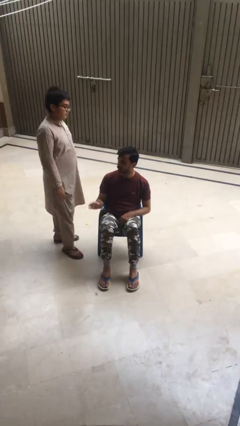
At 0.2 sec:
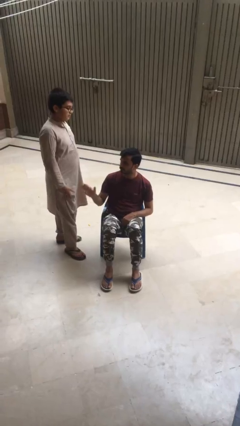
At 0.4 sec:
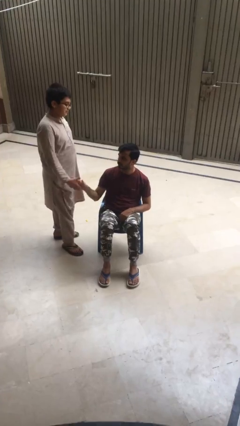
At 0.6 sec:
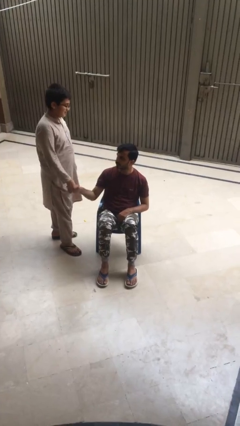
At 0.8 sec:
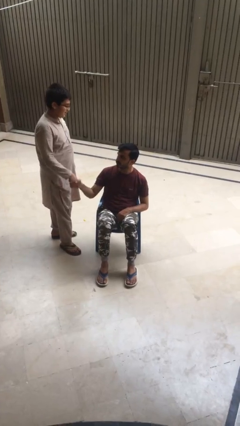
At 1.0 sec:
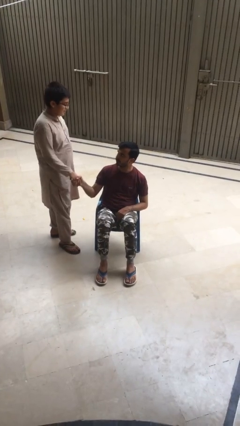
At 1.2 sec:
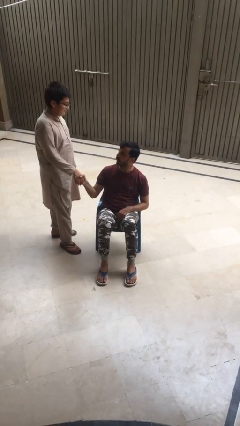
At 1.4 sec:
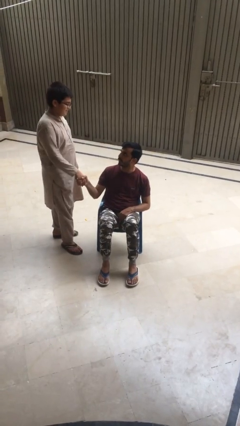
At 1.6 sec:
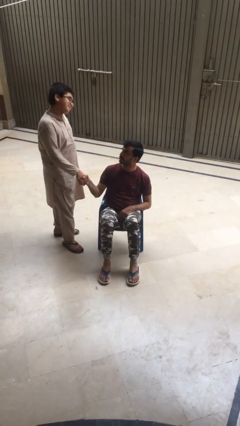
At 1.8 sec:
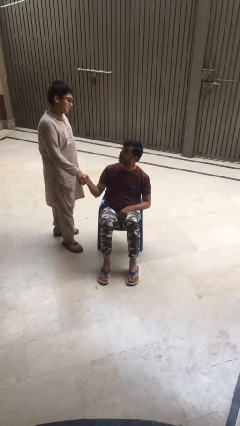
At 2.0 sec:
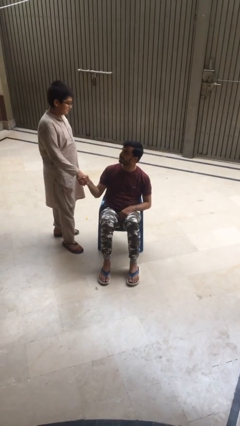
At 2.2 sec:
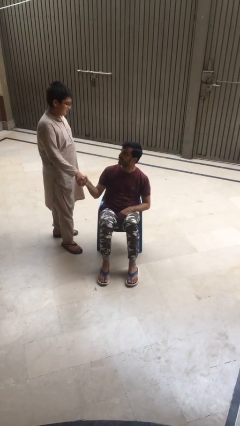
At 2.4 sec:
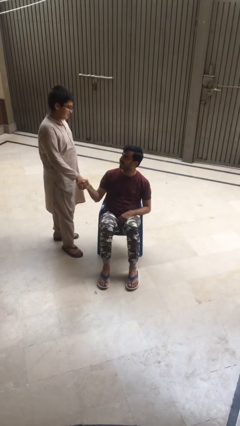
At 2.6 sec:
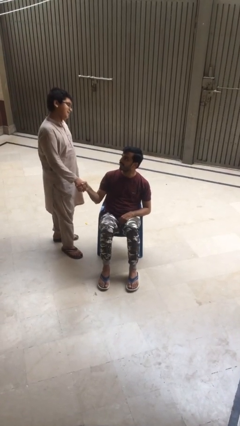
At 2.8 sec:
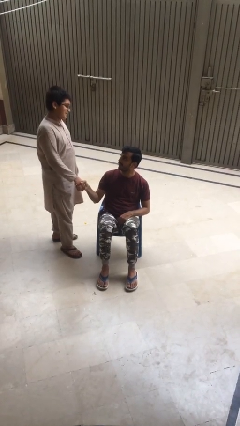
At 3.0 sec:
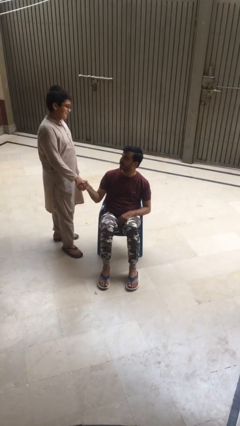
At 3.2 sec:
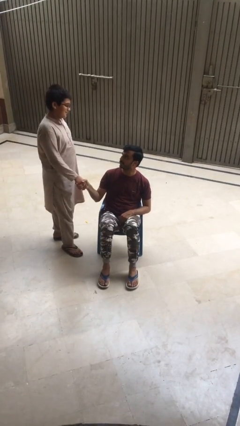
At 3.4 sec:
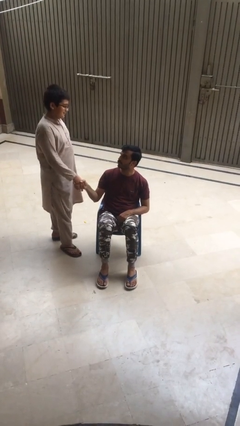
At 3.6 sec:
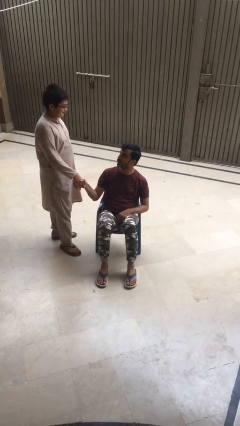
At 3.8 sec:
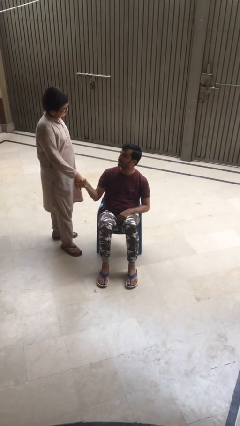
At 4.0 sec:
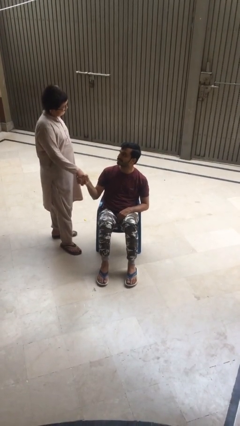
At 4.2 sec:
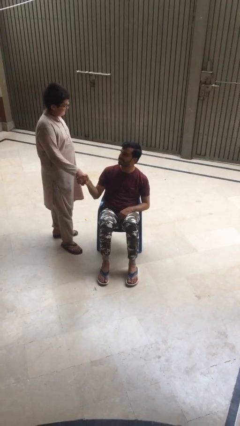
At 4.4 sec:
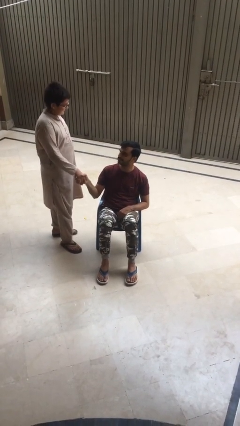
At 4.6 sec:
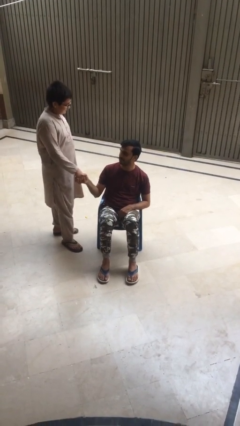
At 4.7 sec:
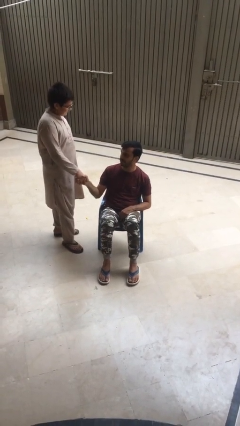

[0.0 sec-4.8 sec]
person shakes hand

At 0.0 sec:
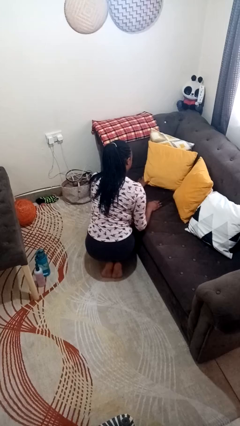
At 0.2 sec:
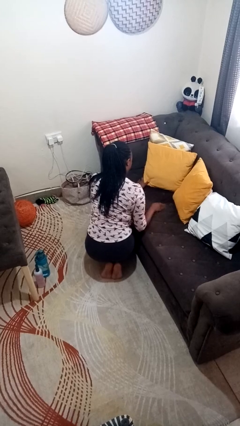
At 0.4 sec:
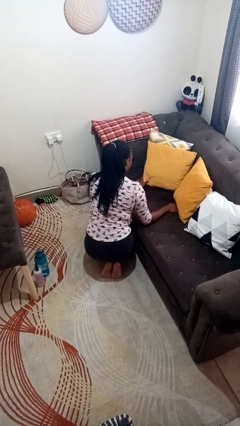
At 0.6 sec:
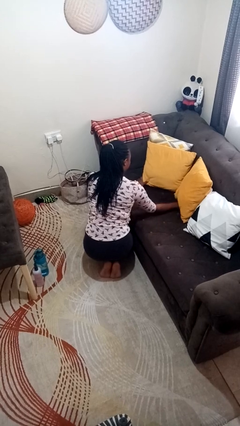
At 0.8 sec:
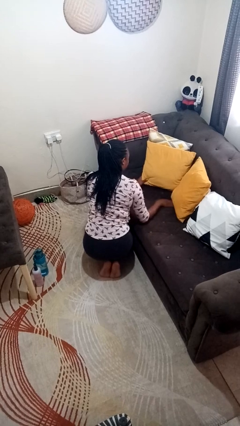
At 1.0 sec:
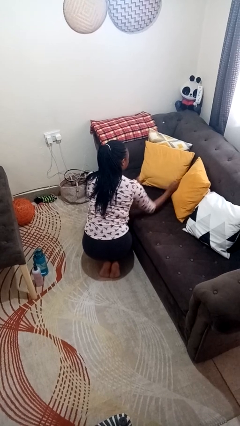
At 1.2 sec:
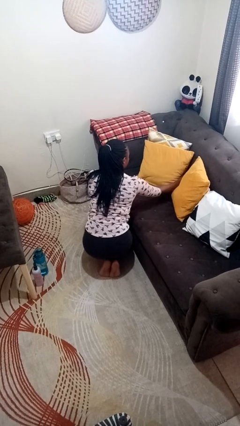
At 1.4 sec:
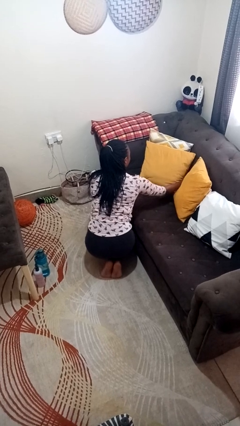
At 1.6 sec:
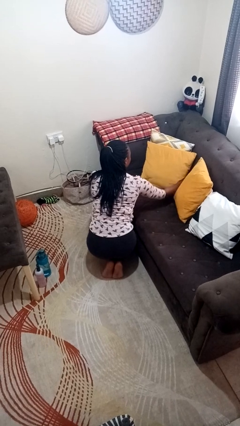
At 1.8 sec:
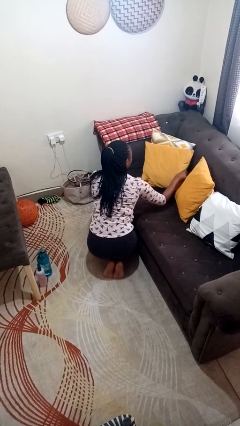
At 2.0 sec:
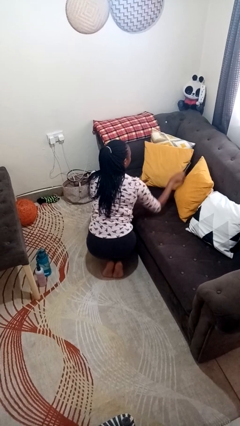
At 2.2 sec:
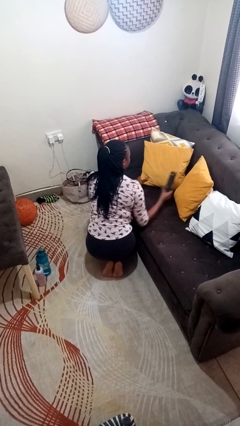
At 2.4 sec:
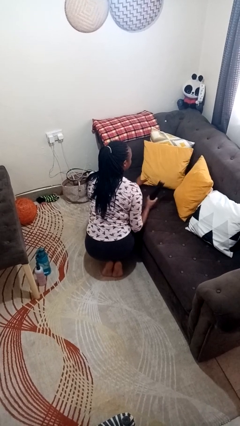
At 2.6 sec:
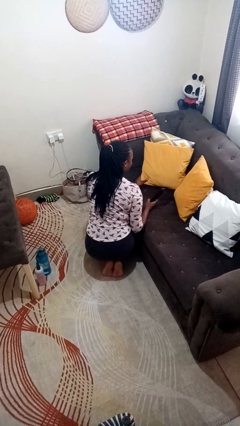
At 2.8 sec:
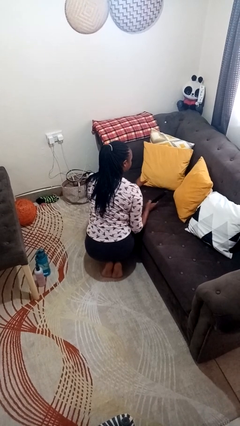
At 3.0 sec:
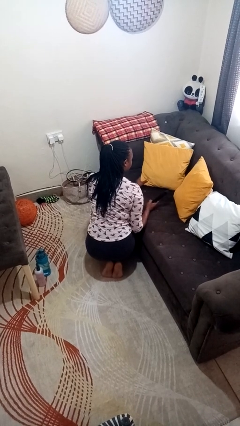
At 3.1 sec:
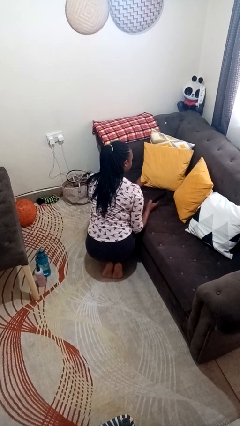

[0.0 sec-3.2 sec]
person searches in couch

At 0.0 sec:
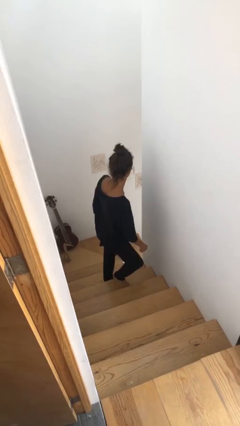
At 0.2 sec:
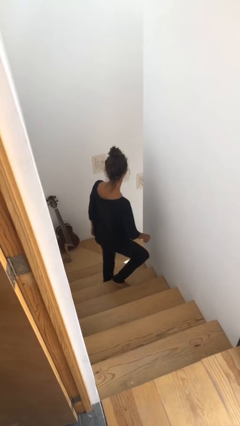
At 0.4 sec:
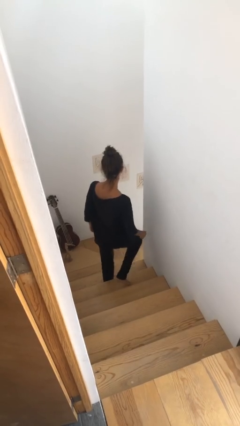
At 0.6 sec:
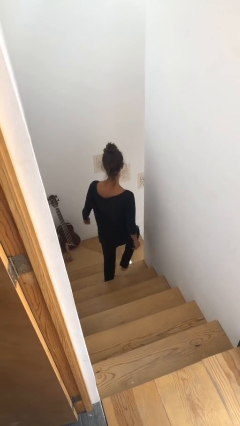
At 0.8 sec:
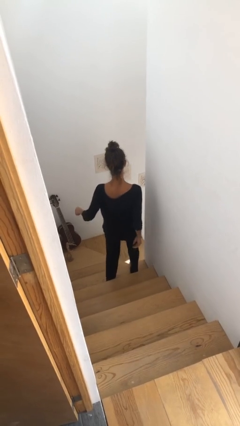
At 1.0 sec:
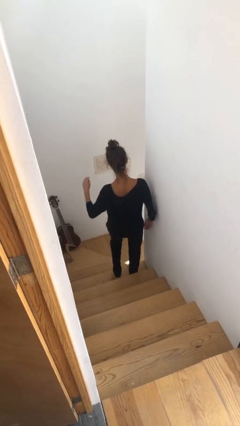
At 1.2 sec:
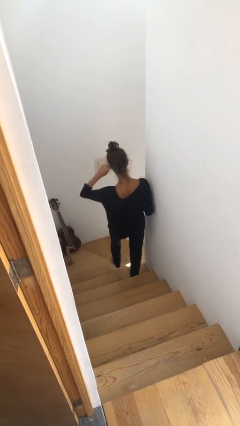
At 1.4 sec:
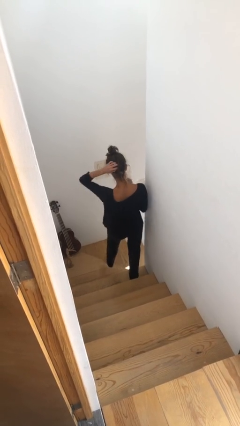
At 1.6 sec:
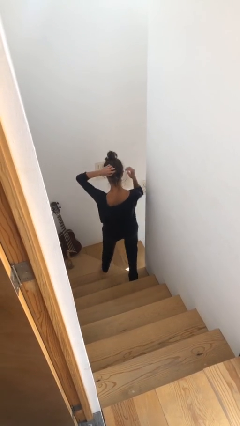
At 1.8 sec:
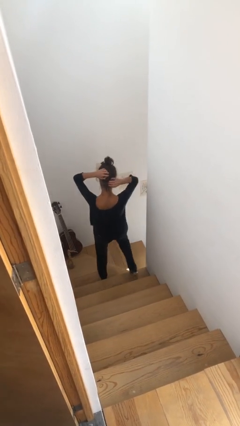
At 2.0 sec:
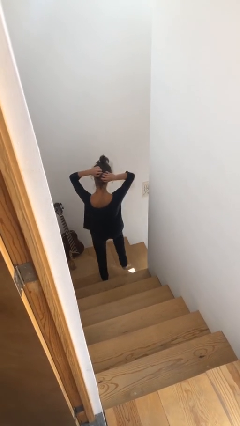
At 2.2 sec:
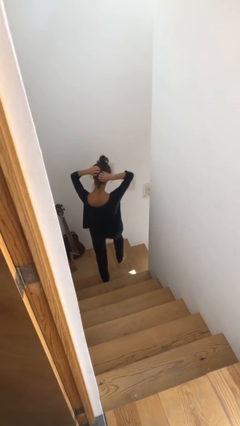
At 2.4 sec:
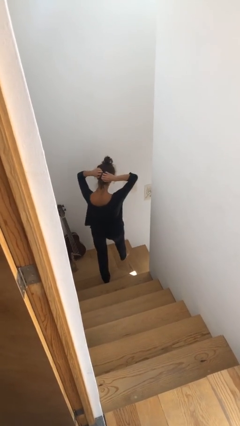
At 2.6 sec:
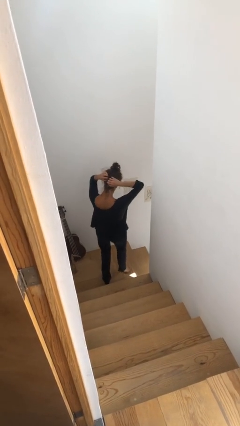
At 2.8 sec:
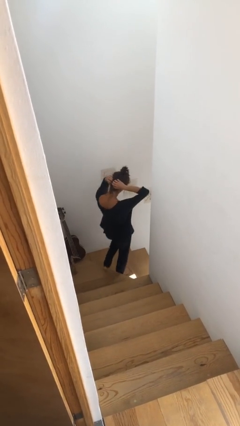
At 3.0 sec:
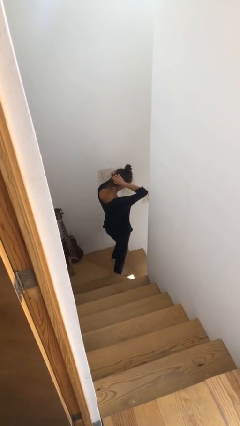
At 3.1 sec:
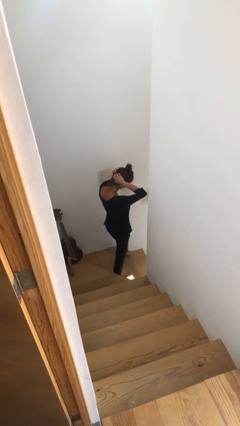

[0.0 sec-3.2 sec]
person climbs down stairs

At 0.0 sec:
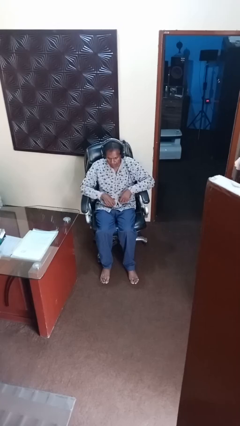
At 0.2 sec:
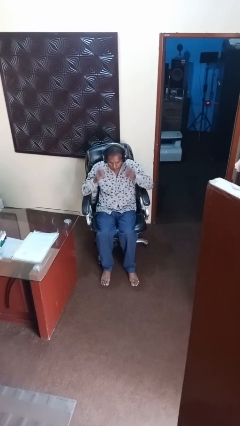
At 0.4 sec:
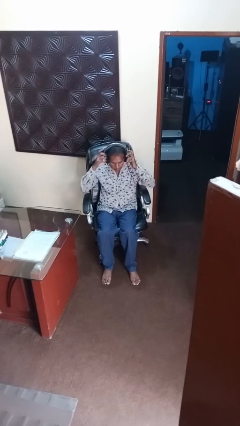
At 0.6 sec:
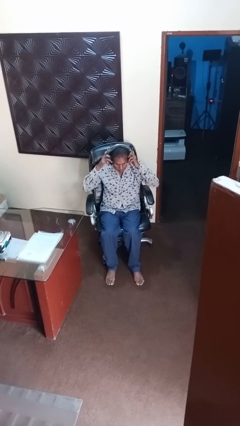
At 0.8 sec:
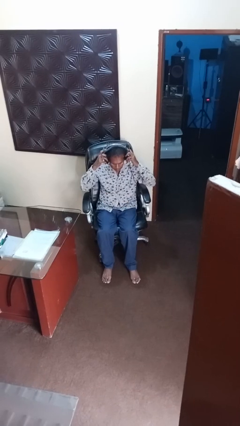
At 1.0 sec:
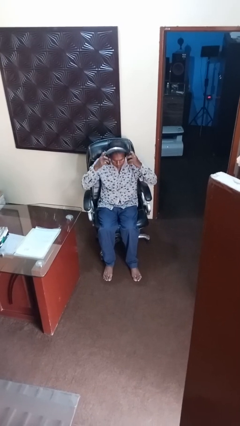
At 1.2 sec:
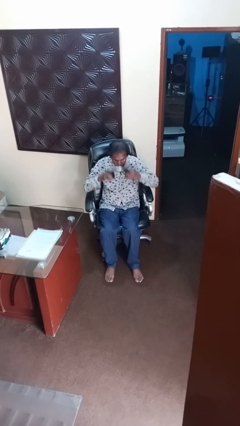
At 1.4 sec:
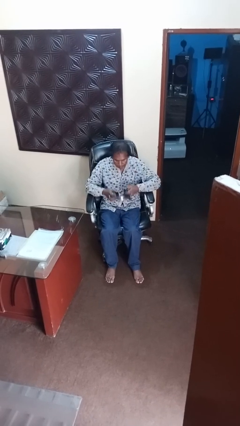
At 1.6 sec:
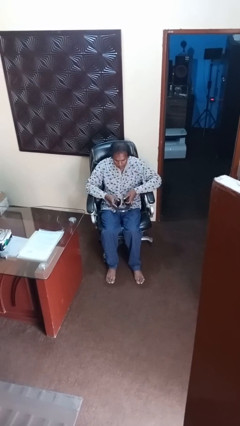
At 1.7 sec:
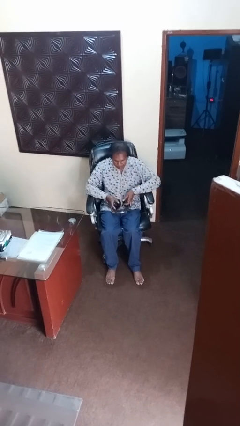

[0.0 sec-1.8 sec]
person takes off headphones

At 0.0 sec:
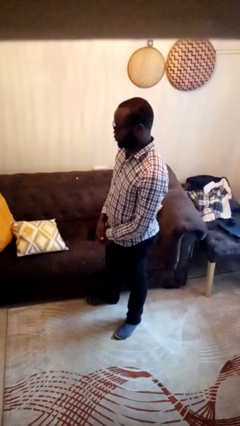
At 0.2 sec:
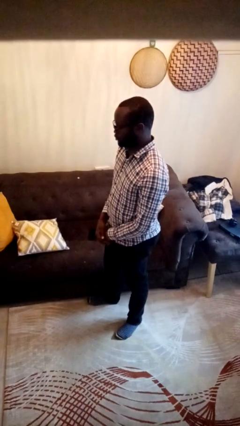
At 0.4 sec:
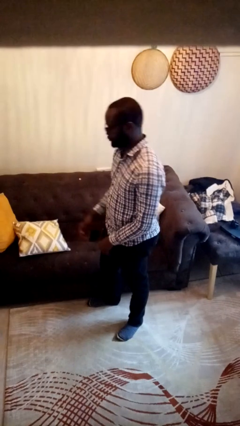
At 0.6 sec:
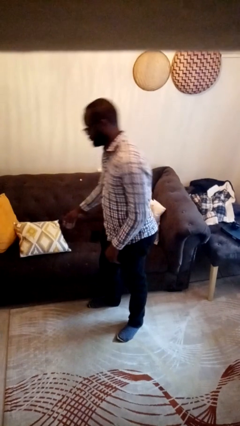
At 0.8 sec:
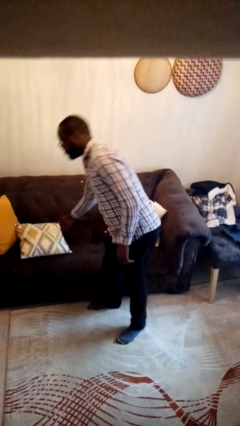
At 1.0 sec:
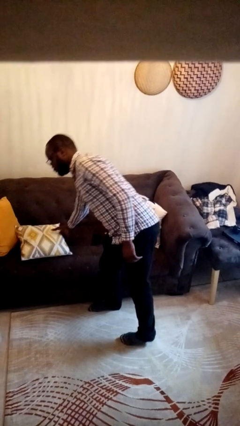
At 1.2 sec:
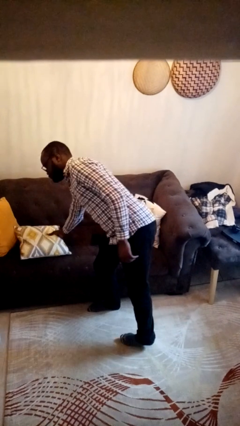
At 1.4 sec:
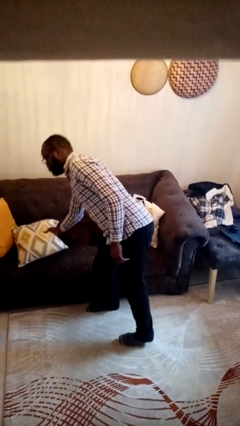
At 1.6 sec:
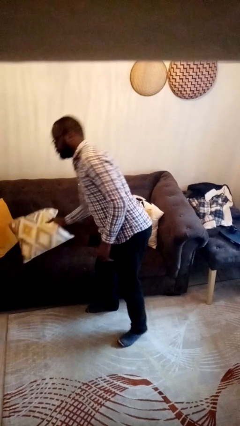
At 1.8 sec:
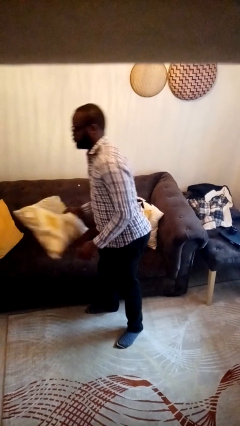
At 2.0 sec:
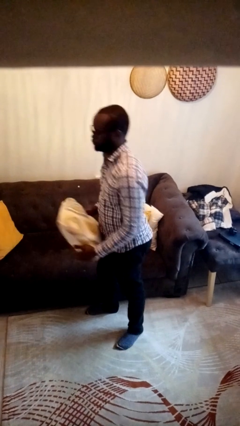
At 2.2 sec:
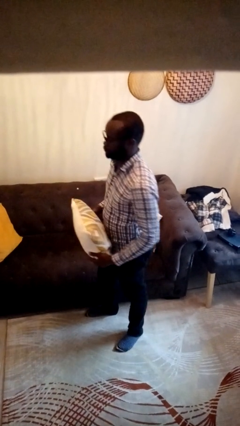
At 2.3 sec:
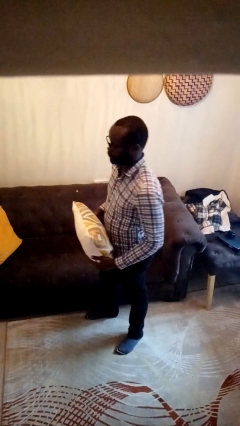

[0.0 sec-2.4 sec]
person picks up object from couch

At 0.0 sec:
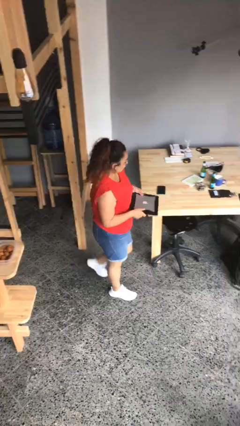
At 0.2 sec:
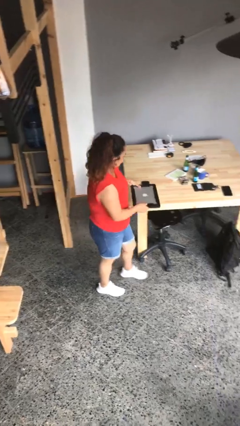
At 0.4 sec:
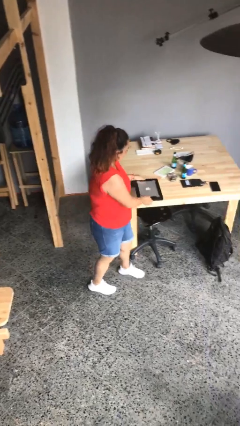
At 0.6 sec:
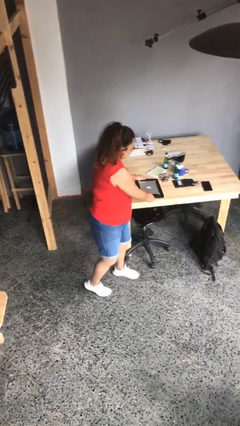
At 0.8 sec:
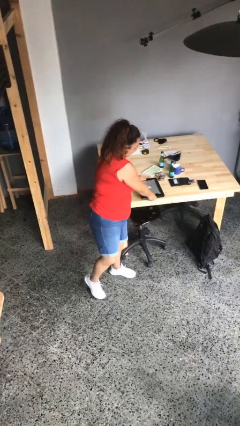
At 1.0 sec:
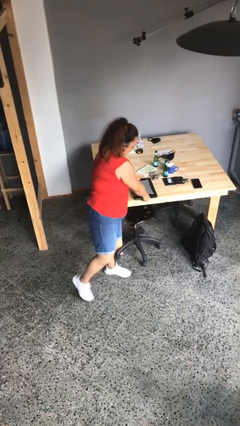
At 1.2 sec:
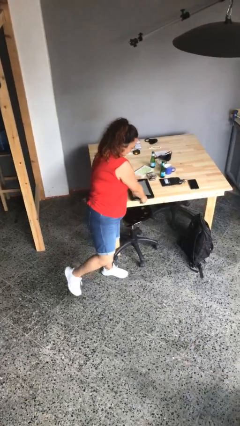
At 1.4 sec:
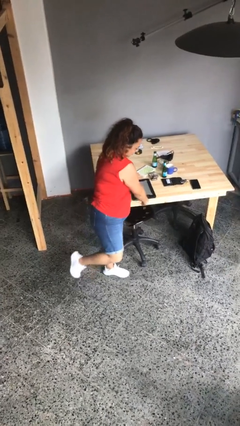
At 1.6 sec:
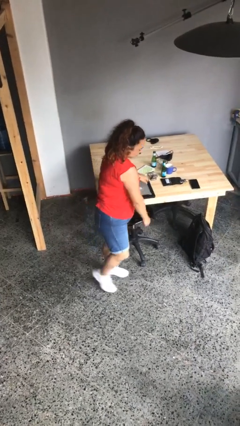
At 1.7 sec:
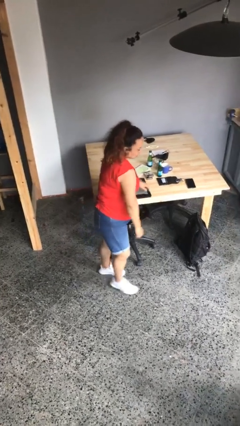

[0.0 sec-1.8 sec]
person puts down object on table
